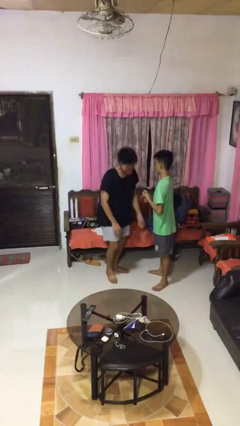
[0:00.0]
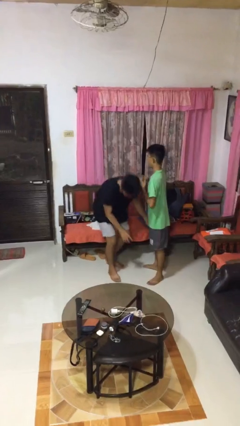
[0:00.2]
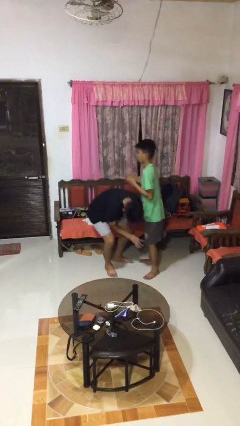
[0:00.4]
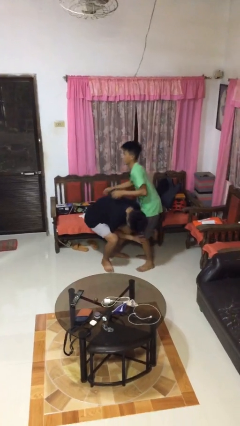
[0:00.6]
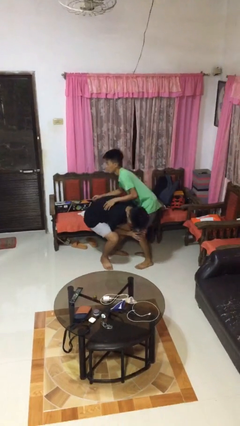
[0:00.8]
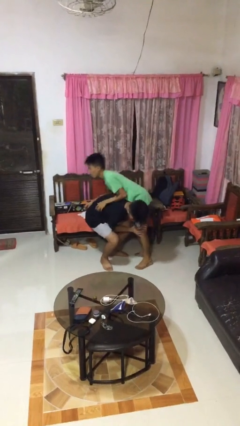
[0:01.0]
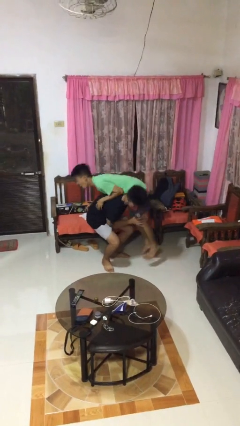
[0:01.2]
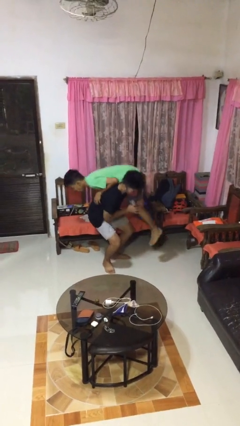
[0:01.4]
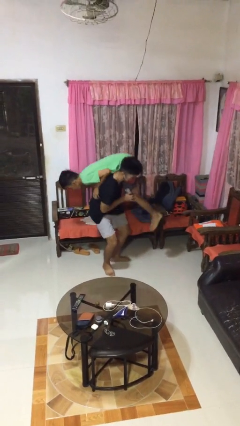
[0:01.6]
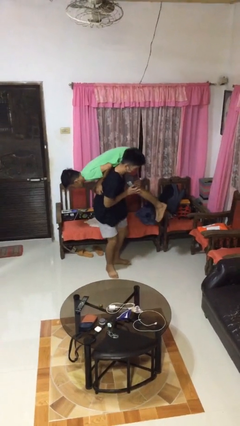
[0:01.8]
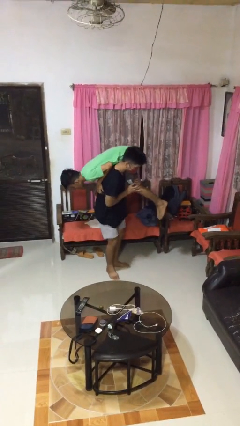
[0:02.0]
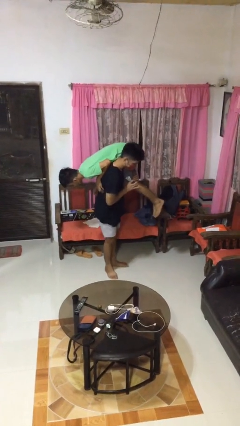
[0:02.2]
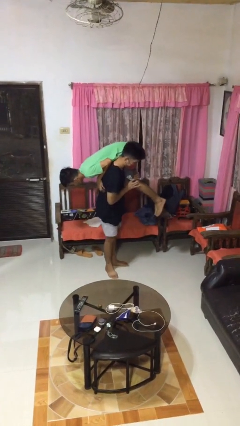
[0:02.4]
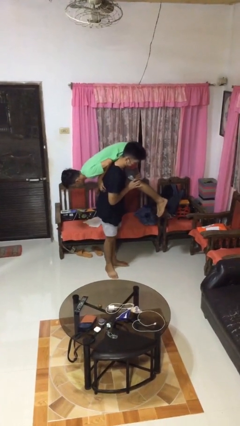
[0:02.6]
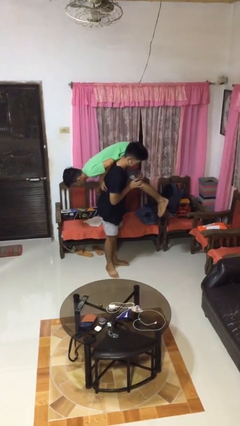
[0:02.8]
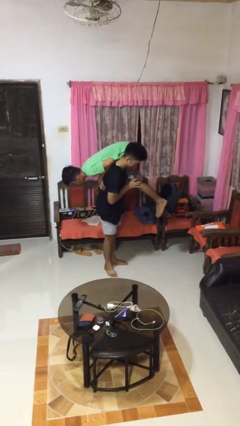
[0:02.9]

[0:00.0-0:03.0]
person carries person over shoulder

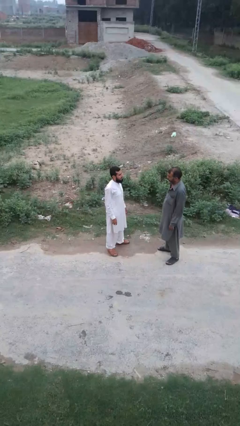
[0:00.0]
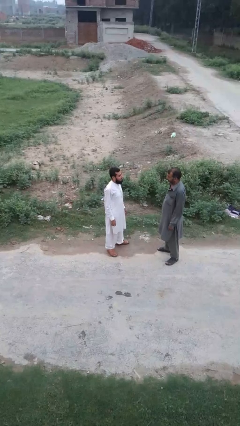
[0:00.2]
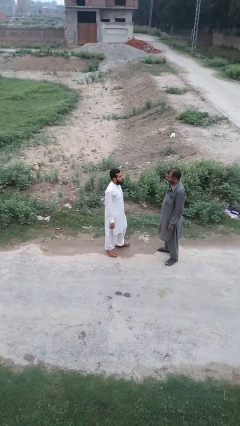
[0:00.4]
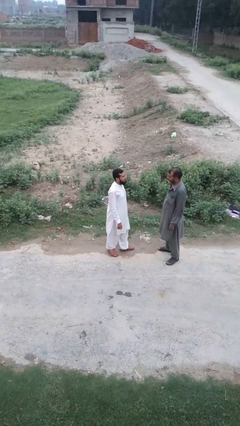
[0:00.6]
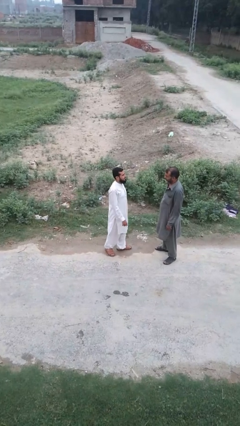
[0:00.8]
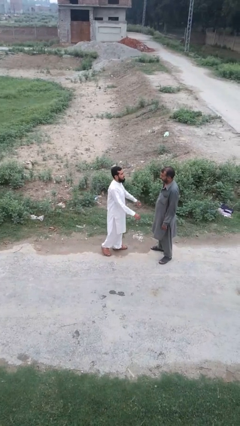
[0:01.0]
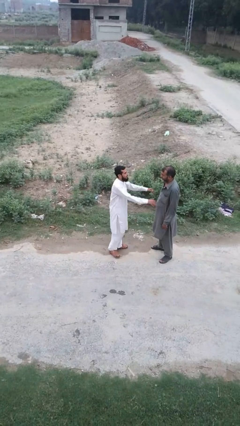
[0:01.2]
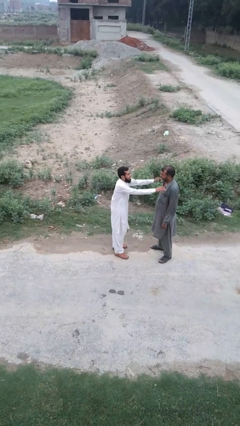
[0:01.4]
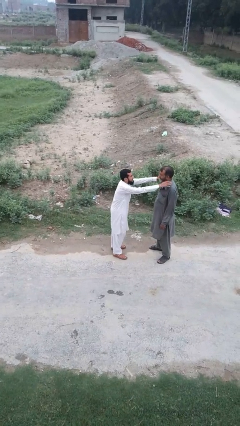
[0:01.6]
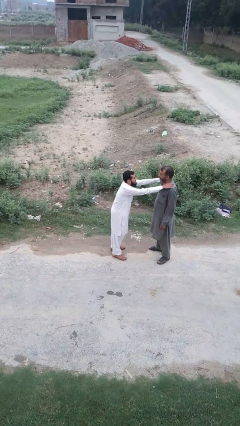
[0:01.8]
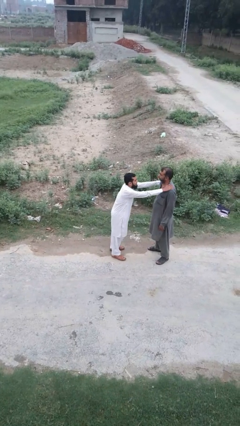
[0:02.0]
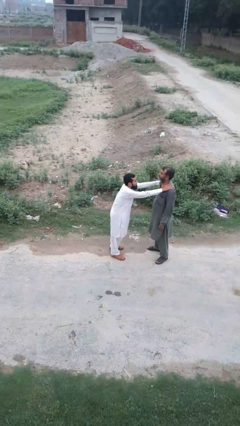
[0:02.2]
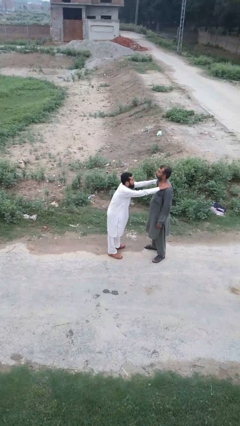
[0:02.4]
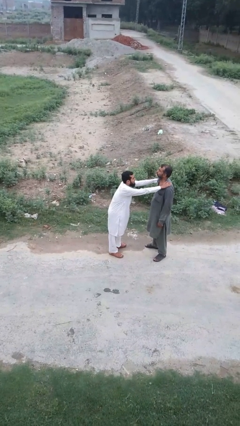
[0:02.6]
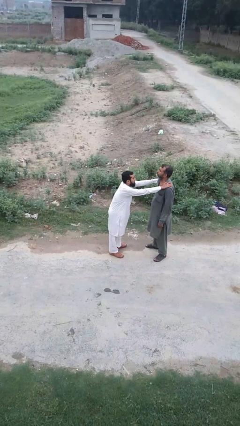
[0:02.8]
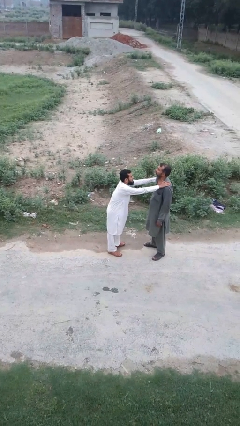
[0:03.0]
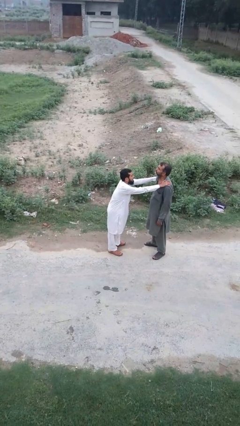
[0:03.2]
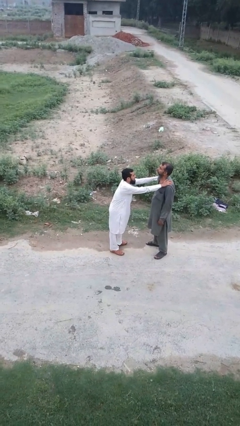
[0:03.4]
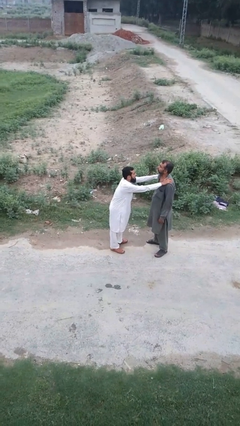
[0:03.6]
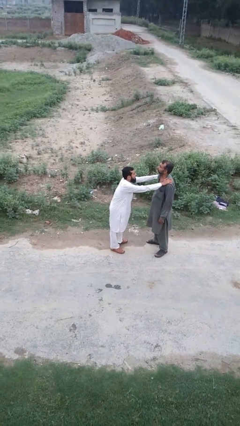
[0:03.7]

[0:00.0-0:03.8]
person pounds shoulders of person

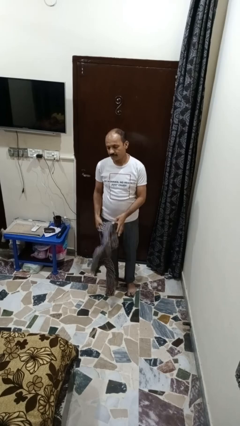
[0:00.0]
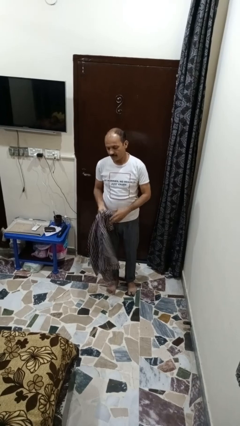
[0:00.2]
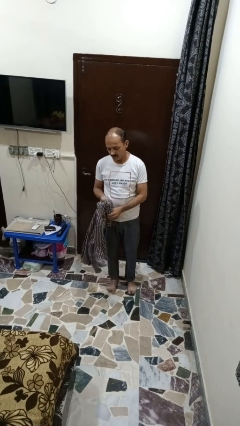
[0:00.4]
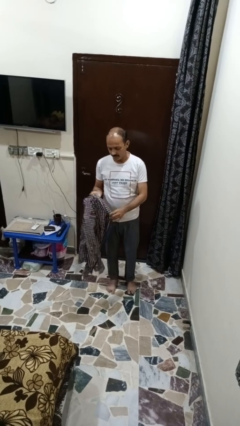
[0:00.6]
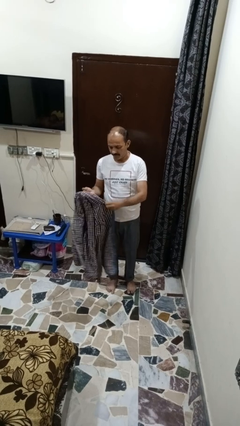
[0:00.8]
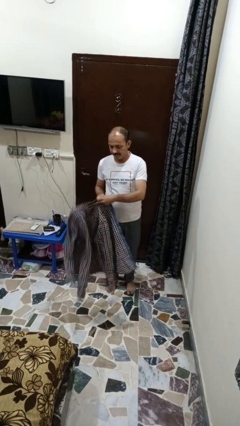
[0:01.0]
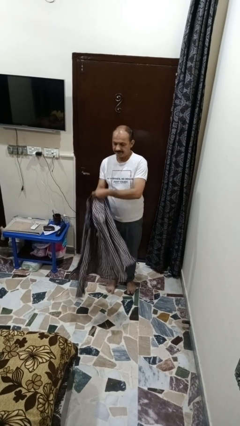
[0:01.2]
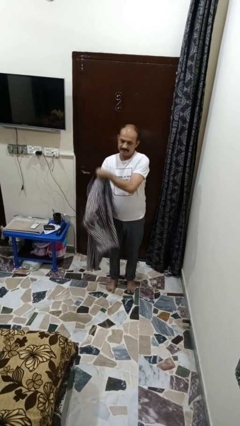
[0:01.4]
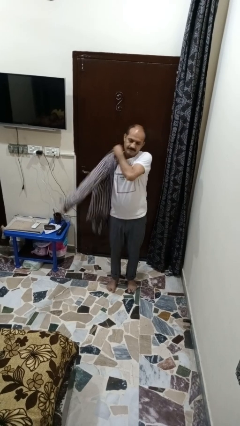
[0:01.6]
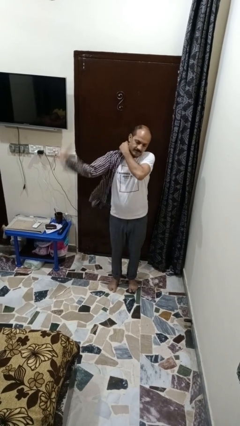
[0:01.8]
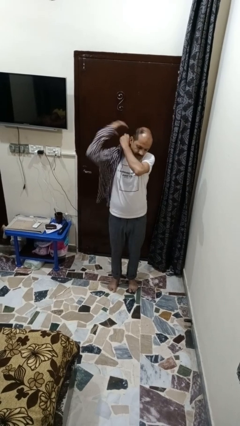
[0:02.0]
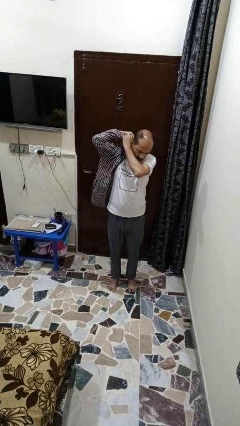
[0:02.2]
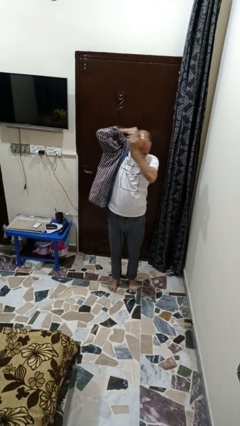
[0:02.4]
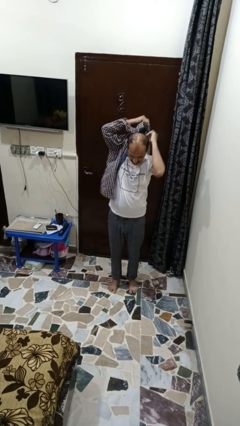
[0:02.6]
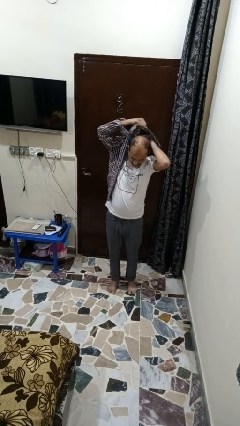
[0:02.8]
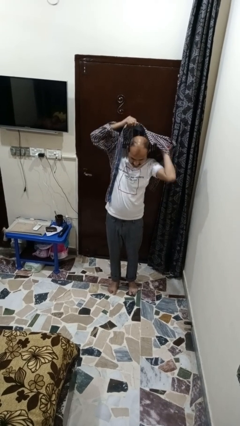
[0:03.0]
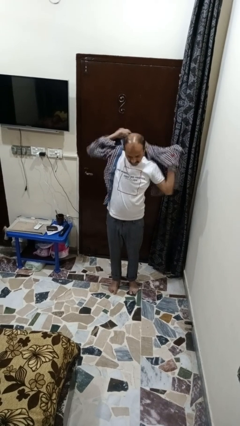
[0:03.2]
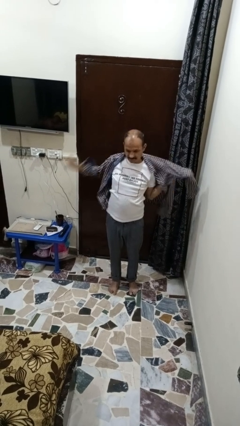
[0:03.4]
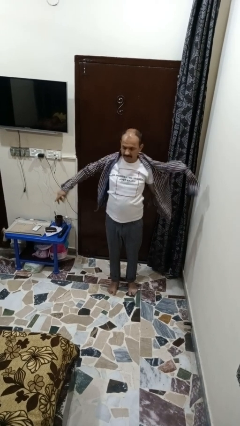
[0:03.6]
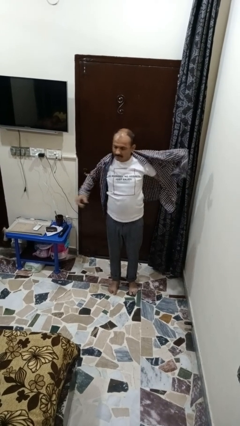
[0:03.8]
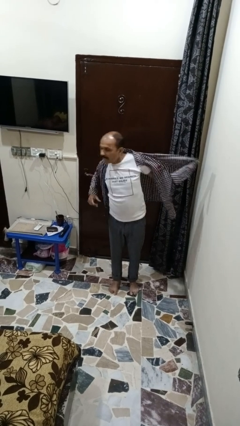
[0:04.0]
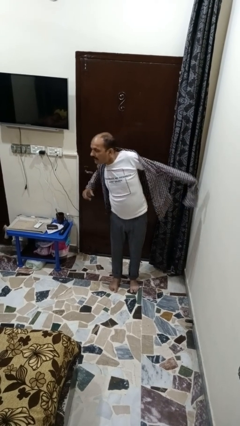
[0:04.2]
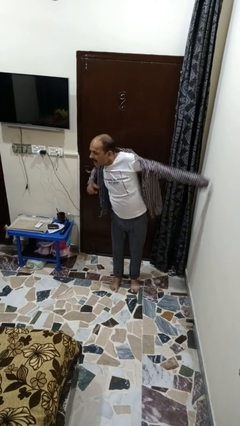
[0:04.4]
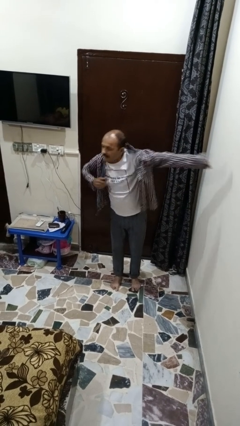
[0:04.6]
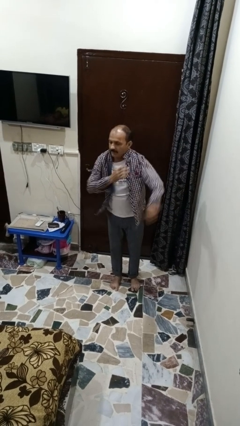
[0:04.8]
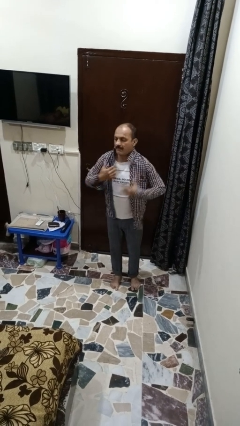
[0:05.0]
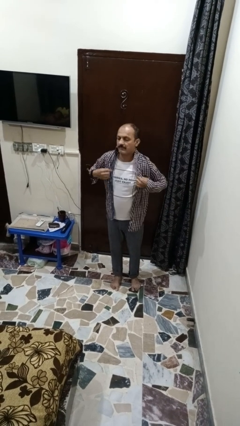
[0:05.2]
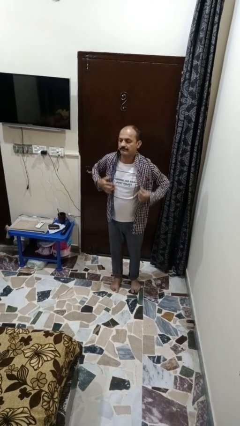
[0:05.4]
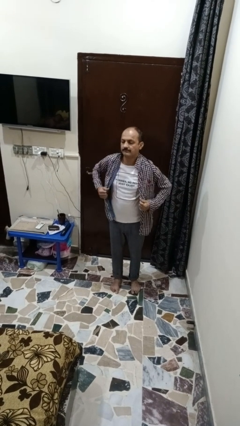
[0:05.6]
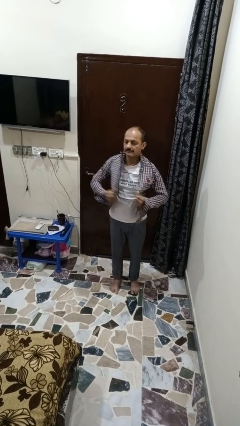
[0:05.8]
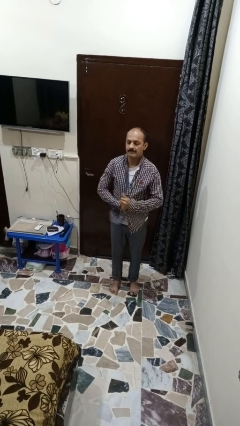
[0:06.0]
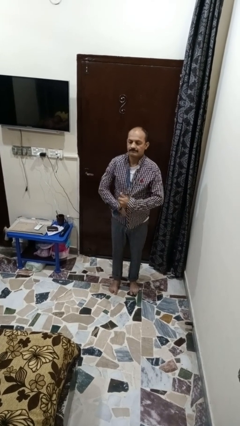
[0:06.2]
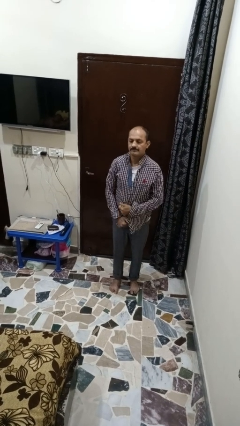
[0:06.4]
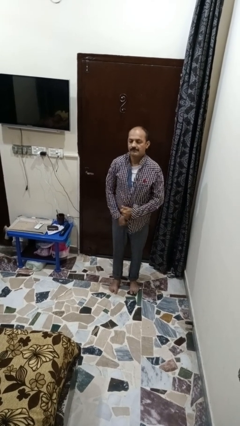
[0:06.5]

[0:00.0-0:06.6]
person puts on shirt

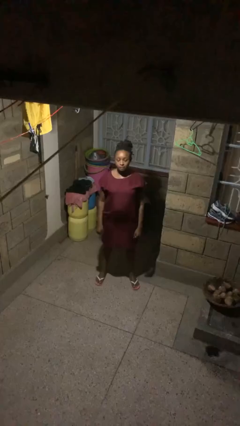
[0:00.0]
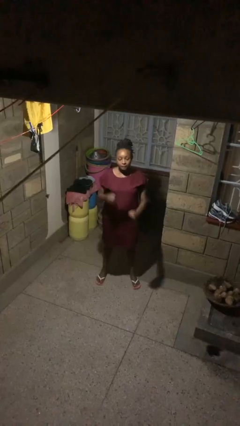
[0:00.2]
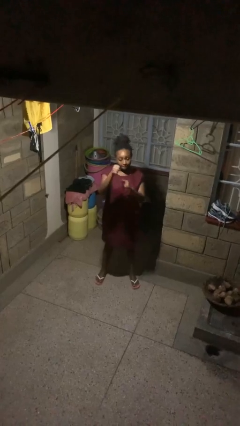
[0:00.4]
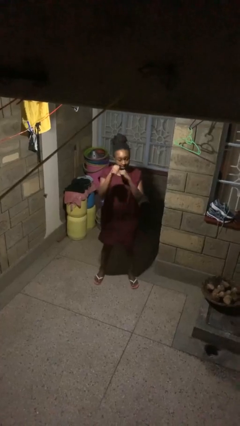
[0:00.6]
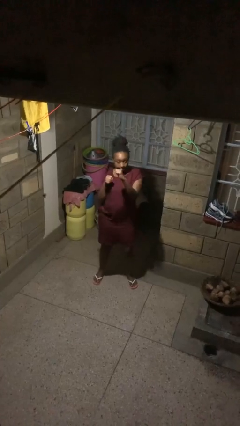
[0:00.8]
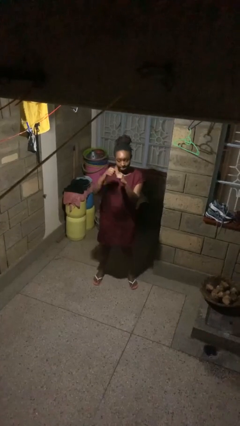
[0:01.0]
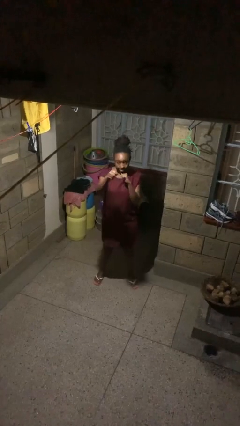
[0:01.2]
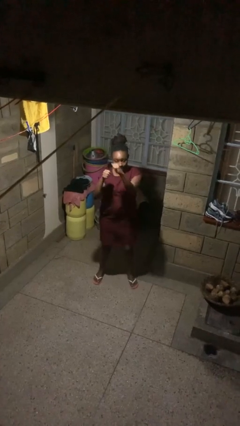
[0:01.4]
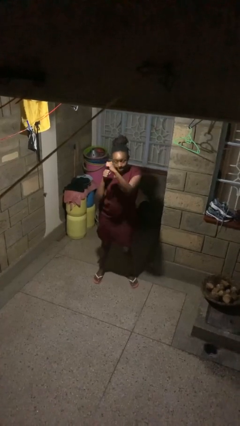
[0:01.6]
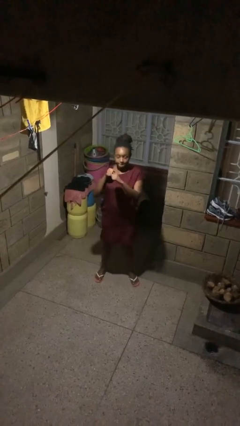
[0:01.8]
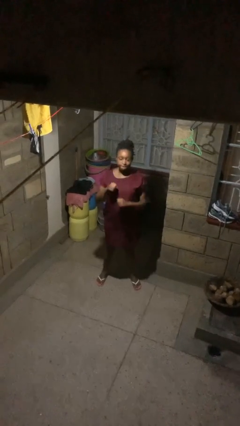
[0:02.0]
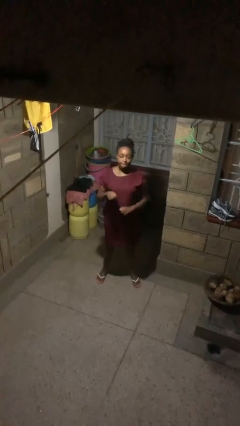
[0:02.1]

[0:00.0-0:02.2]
person punches

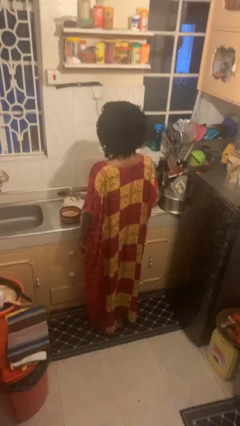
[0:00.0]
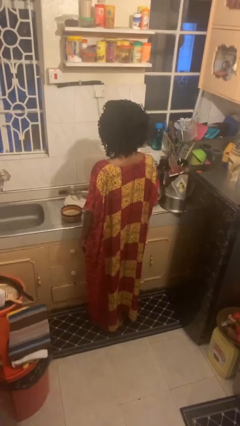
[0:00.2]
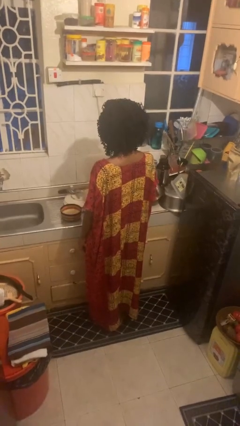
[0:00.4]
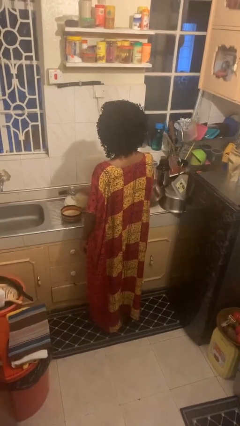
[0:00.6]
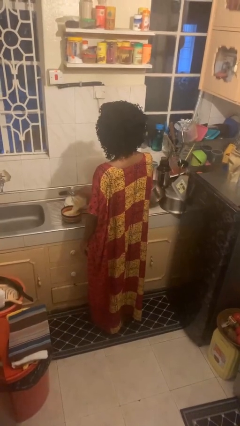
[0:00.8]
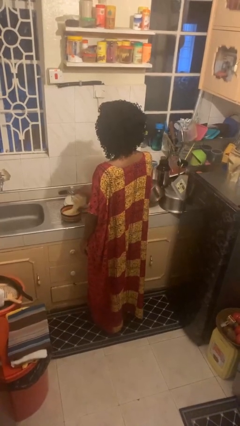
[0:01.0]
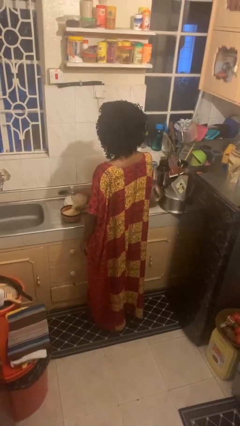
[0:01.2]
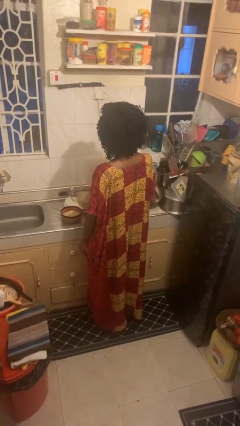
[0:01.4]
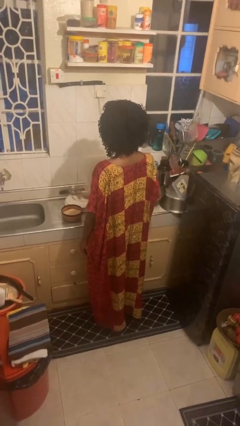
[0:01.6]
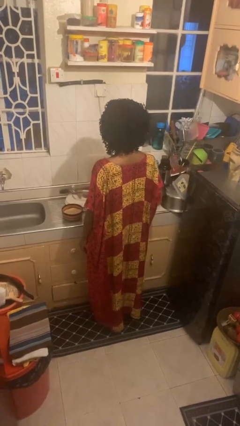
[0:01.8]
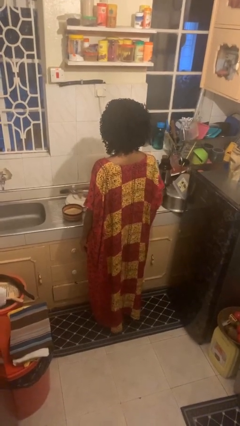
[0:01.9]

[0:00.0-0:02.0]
person pours into bowl
